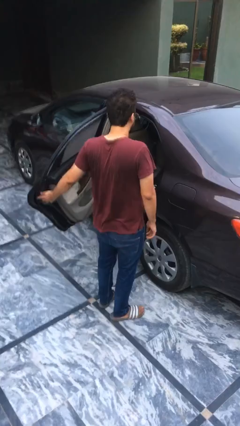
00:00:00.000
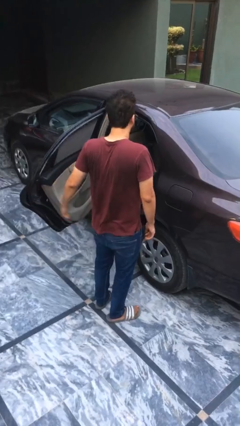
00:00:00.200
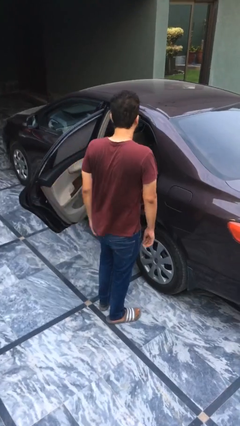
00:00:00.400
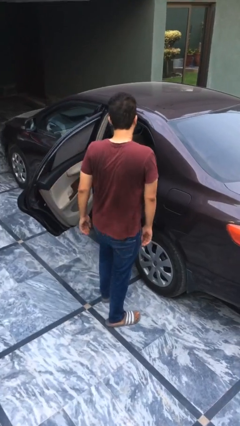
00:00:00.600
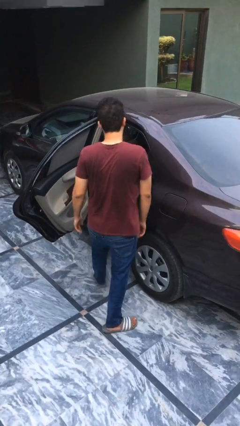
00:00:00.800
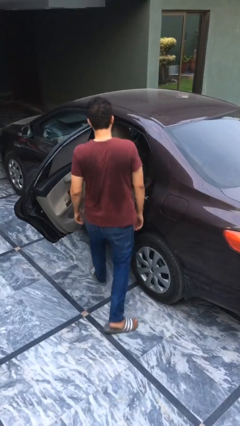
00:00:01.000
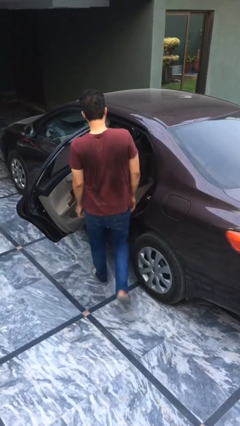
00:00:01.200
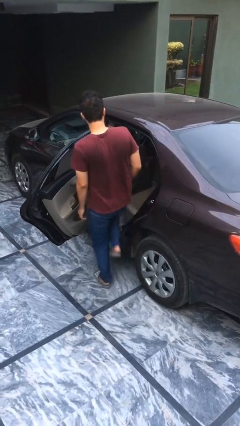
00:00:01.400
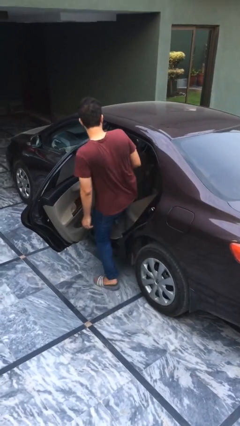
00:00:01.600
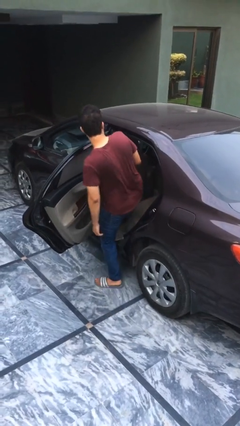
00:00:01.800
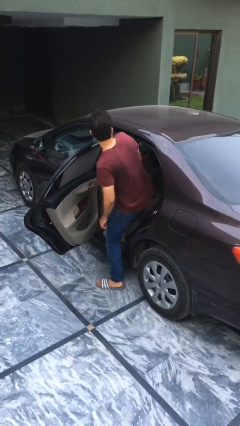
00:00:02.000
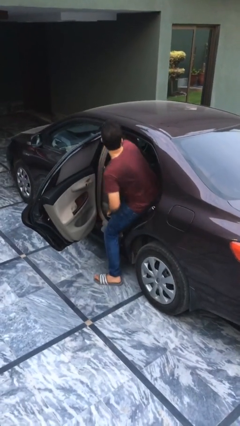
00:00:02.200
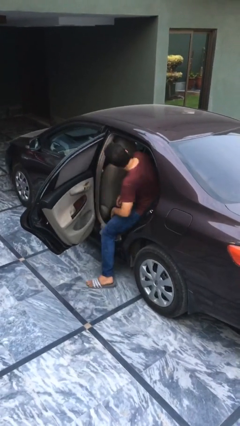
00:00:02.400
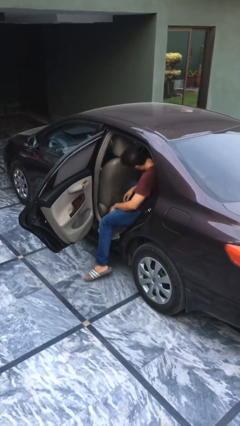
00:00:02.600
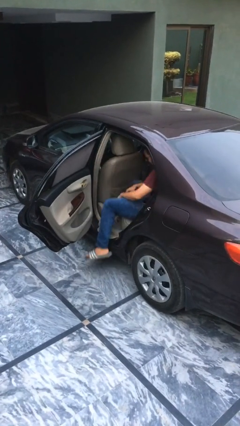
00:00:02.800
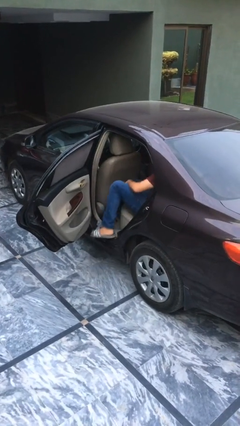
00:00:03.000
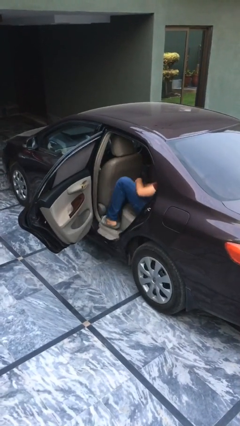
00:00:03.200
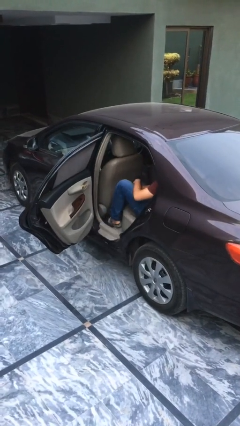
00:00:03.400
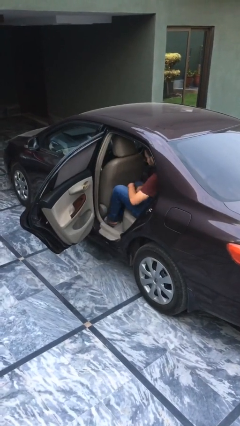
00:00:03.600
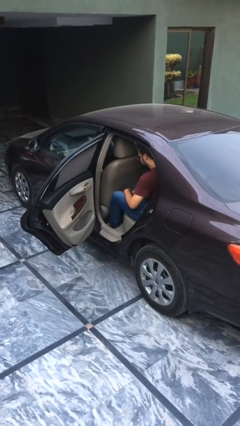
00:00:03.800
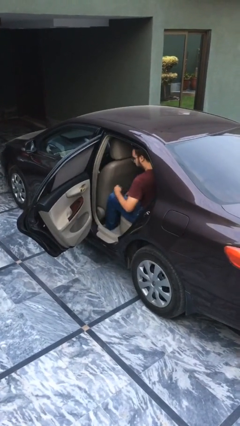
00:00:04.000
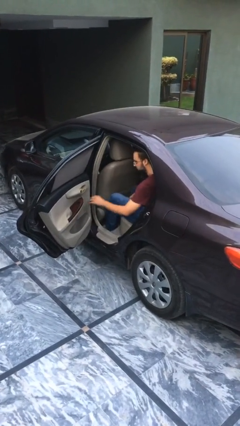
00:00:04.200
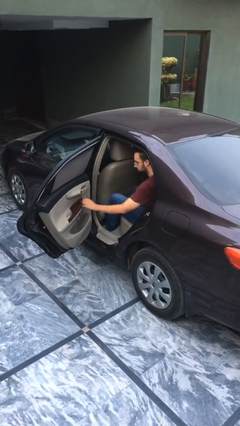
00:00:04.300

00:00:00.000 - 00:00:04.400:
person enters car

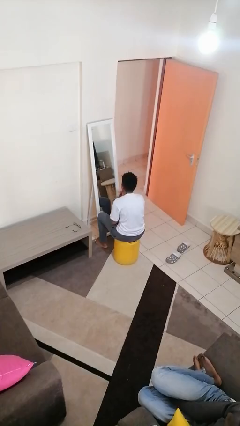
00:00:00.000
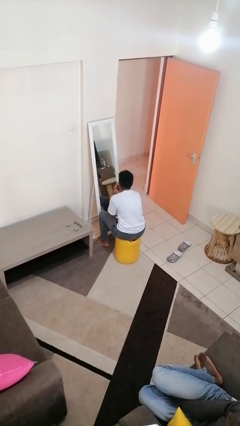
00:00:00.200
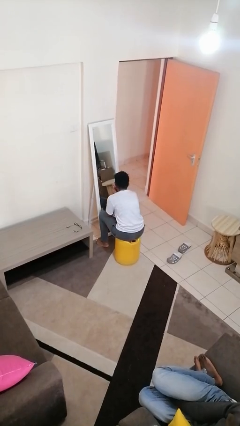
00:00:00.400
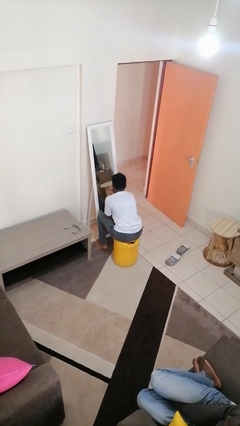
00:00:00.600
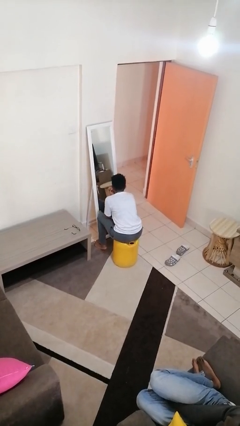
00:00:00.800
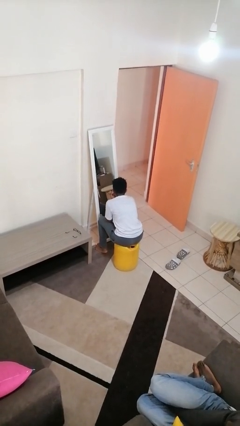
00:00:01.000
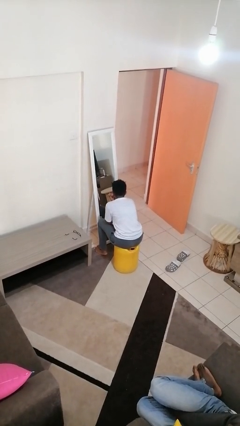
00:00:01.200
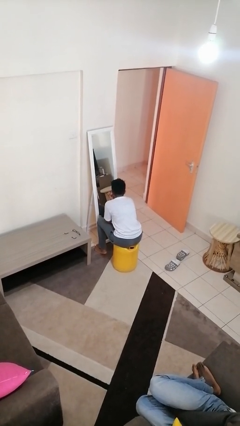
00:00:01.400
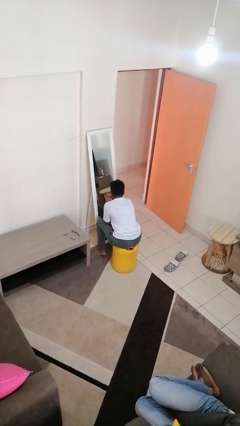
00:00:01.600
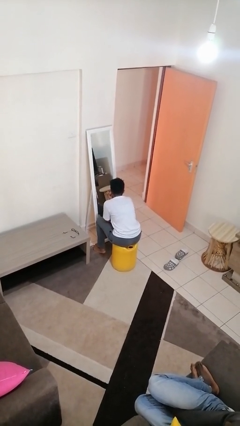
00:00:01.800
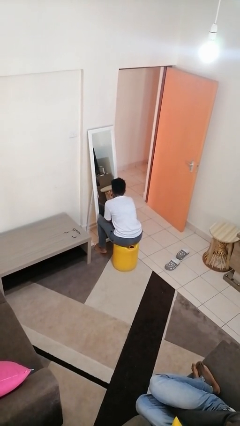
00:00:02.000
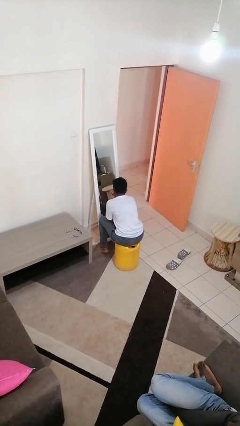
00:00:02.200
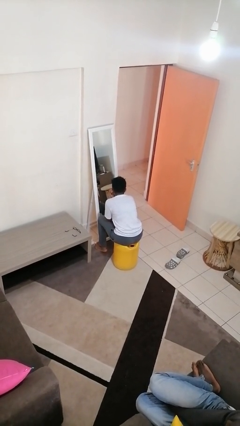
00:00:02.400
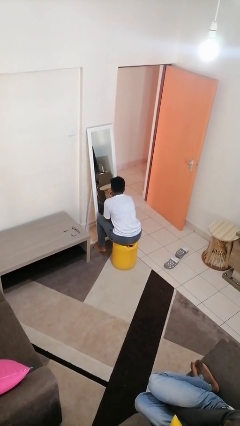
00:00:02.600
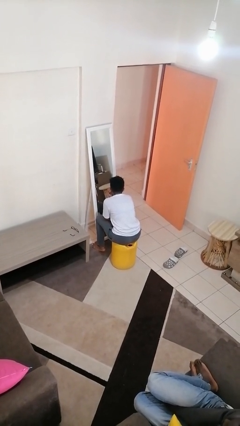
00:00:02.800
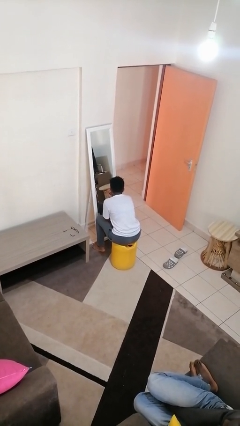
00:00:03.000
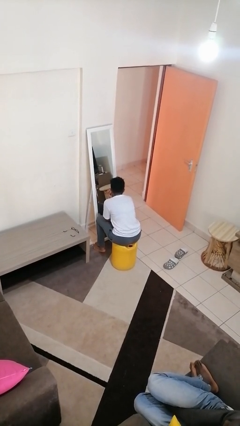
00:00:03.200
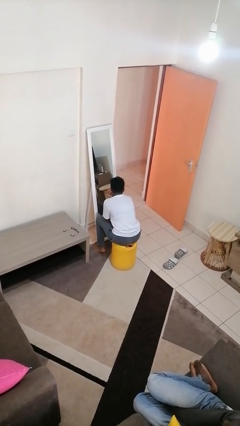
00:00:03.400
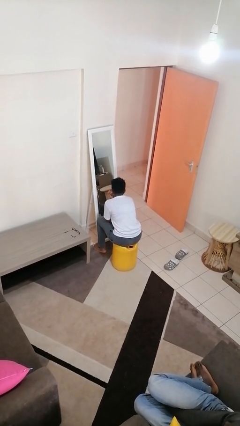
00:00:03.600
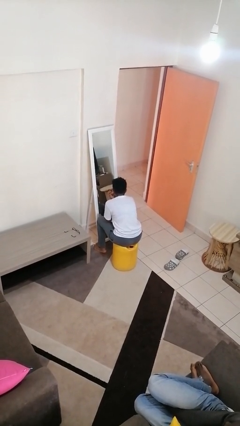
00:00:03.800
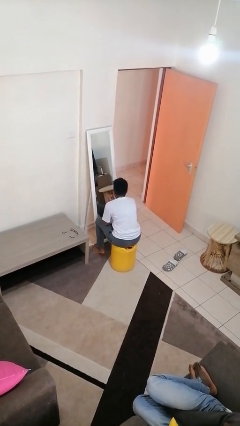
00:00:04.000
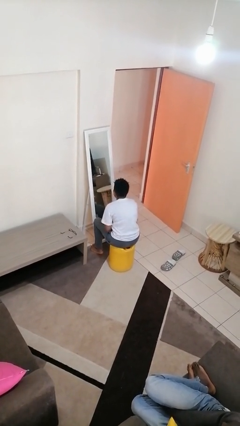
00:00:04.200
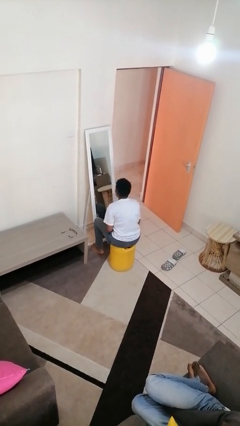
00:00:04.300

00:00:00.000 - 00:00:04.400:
person applies eye makeup

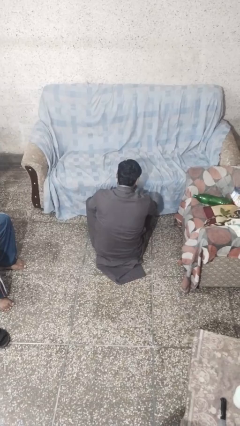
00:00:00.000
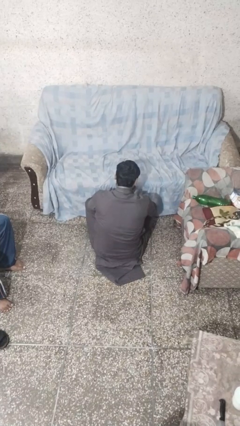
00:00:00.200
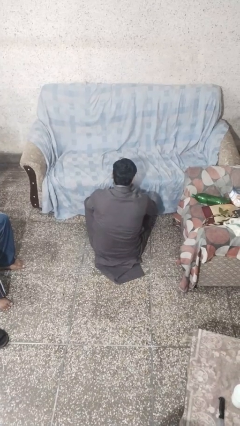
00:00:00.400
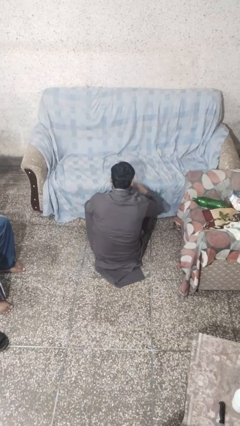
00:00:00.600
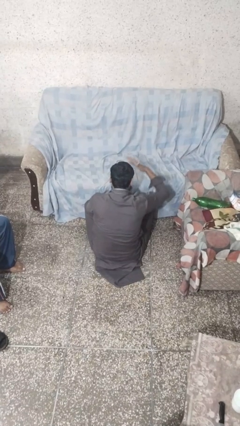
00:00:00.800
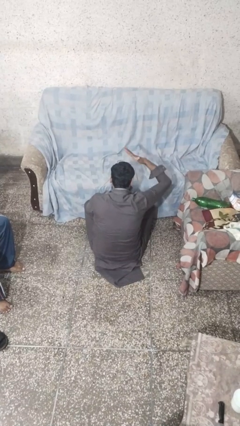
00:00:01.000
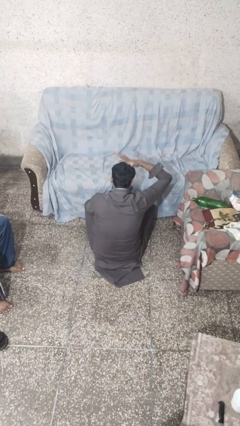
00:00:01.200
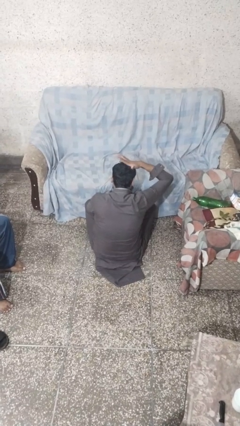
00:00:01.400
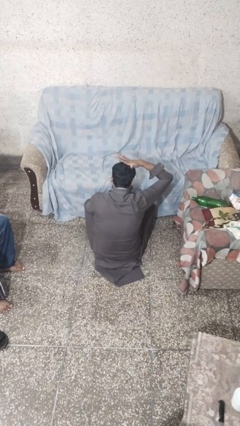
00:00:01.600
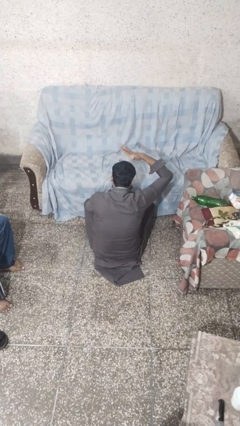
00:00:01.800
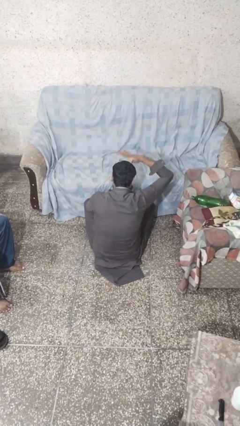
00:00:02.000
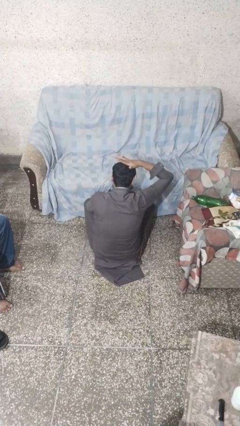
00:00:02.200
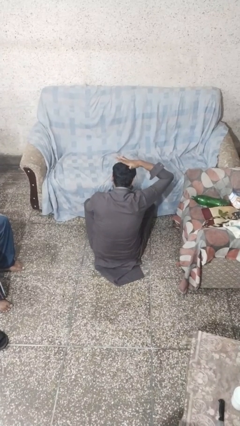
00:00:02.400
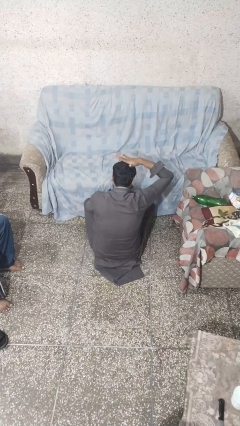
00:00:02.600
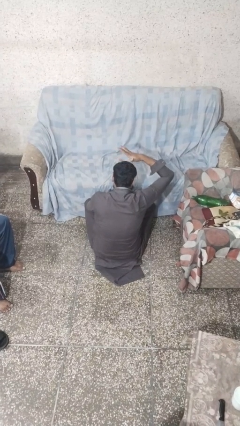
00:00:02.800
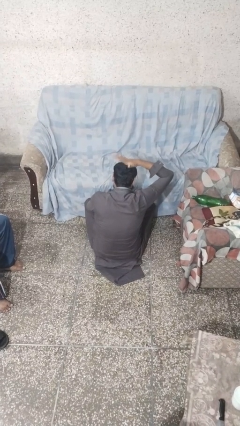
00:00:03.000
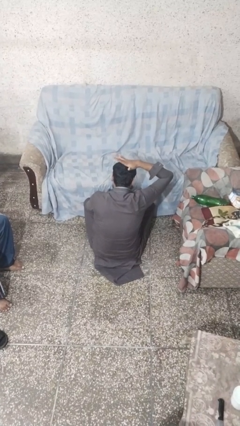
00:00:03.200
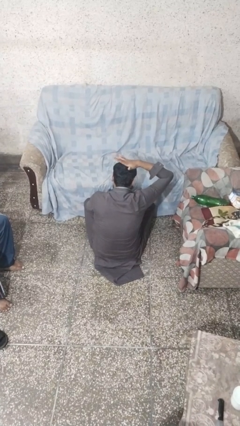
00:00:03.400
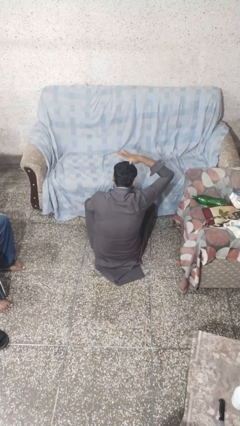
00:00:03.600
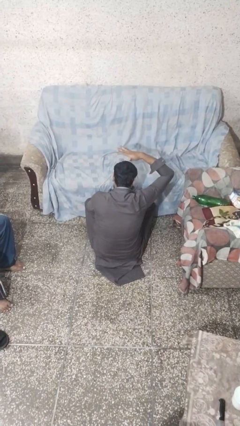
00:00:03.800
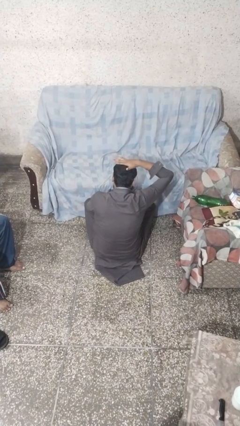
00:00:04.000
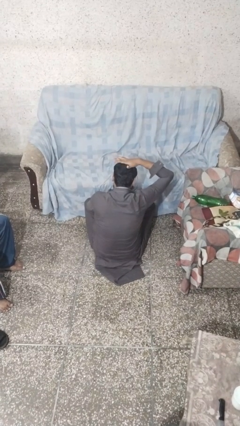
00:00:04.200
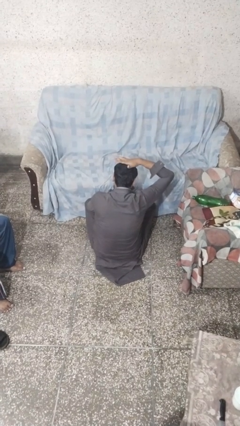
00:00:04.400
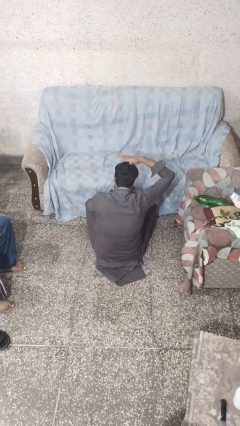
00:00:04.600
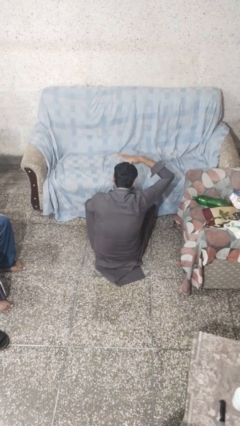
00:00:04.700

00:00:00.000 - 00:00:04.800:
person pats head

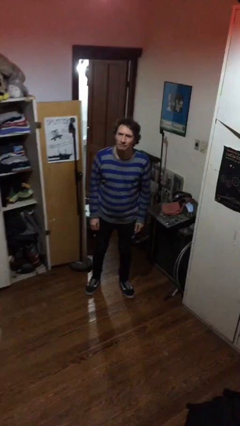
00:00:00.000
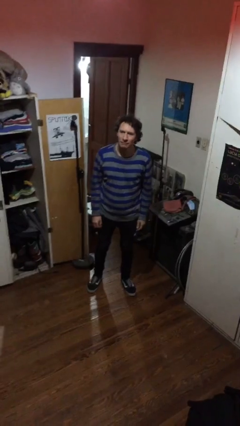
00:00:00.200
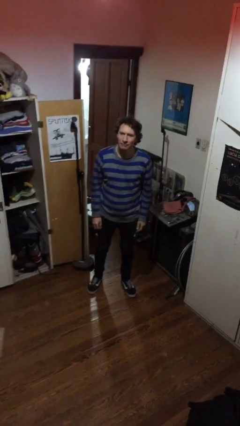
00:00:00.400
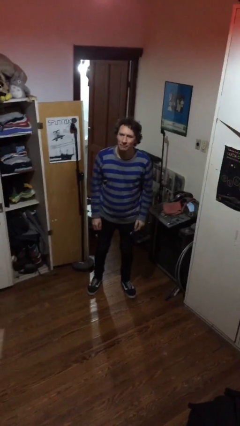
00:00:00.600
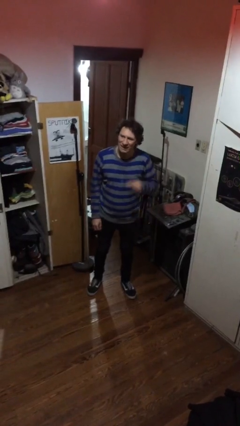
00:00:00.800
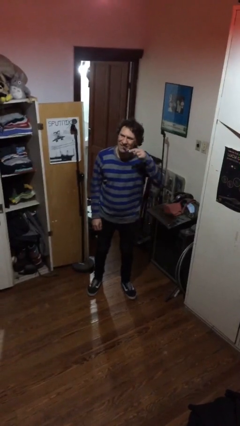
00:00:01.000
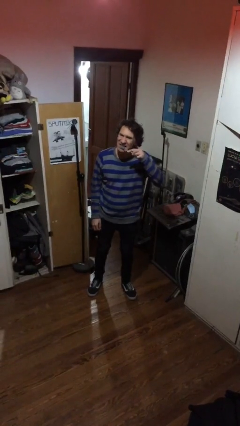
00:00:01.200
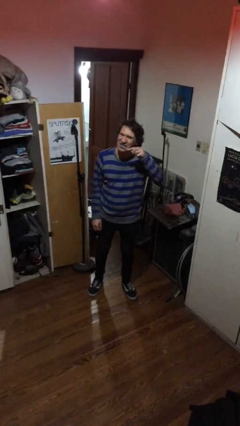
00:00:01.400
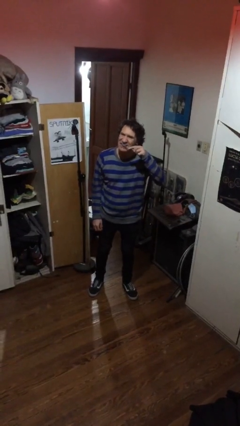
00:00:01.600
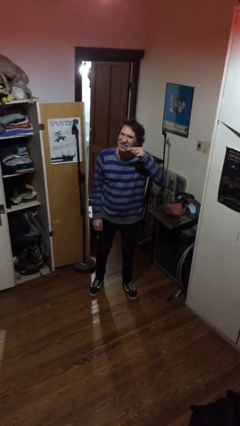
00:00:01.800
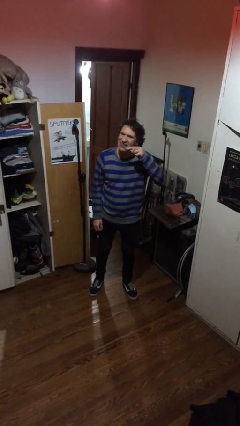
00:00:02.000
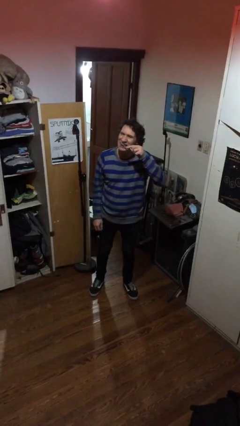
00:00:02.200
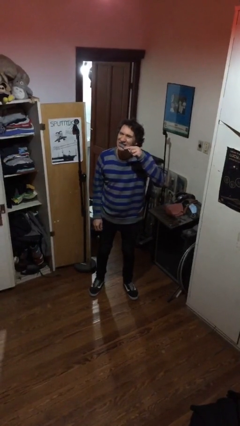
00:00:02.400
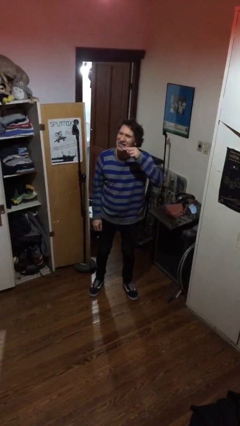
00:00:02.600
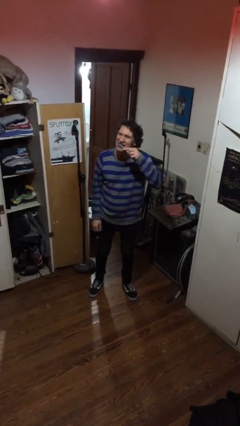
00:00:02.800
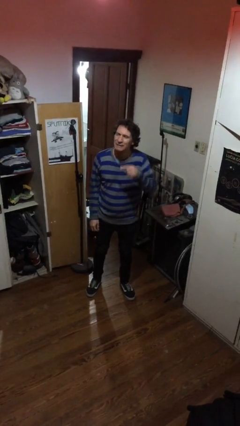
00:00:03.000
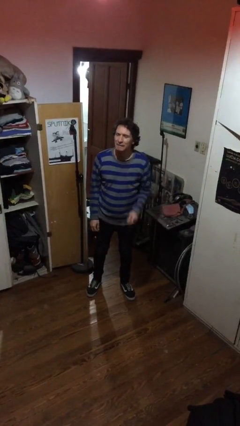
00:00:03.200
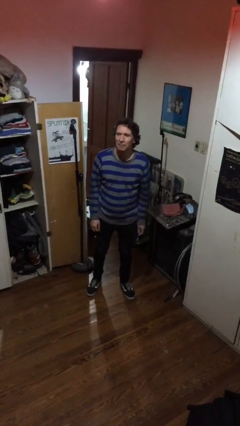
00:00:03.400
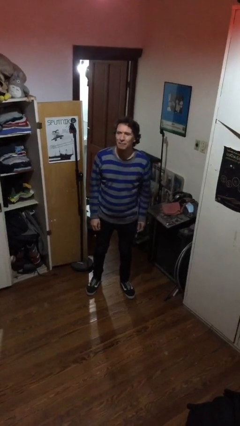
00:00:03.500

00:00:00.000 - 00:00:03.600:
person brushes teeth

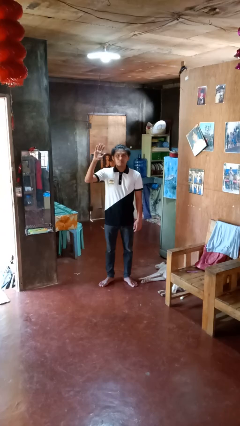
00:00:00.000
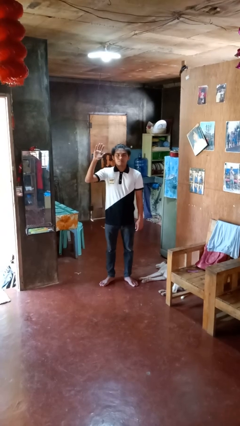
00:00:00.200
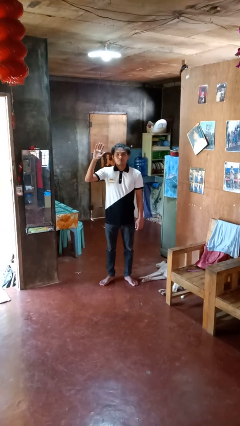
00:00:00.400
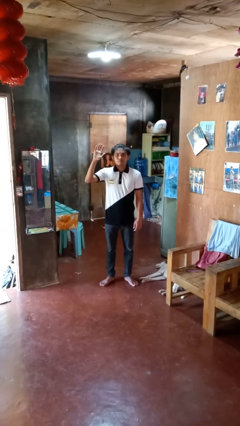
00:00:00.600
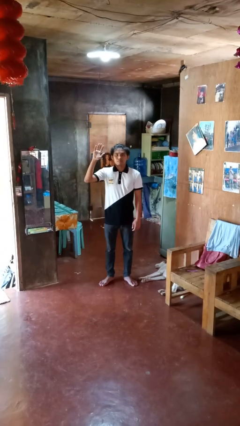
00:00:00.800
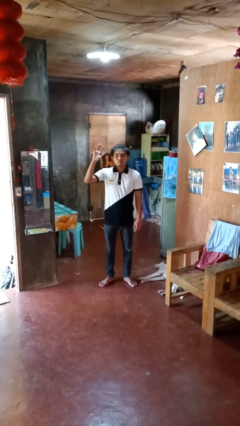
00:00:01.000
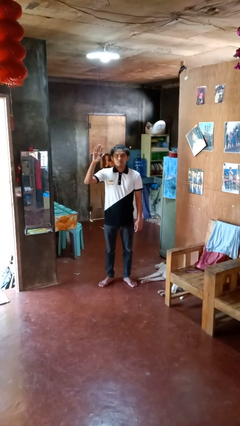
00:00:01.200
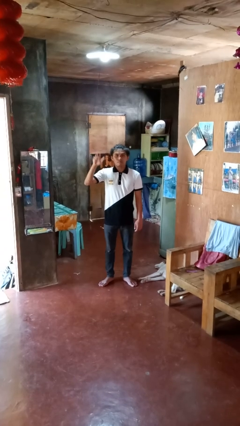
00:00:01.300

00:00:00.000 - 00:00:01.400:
person gestures raise hand
